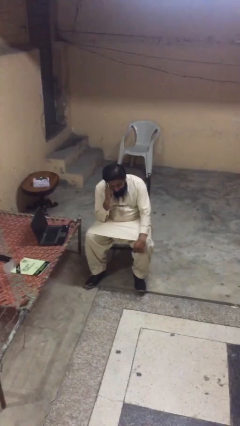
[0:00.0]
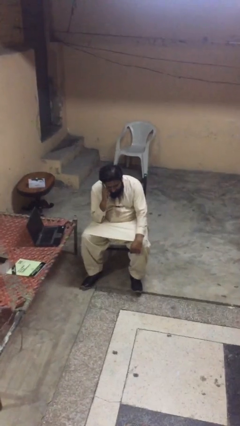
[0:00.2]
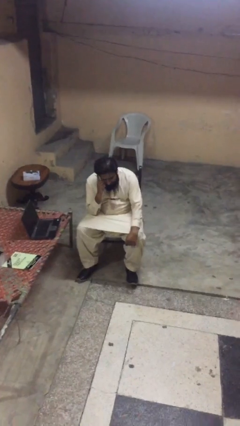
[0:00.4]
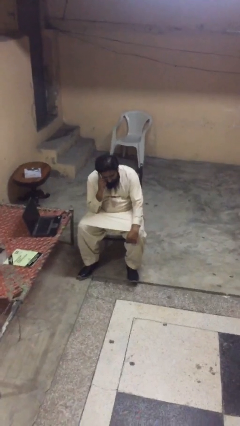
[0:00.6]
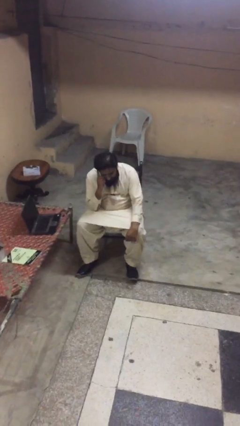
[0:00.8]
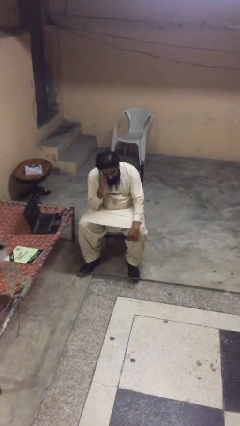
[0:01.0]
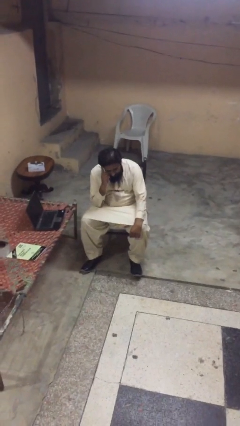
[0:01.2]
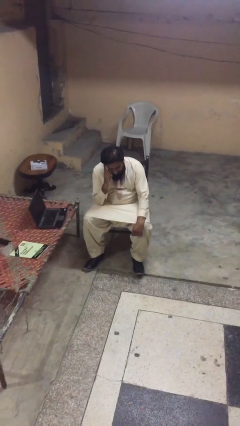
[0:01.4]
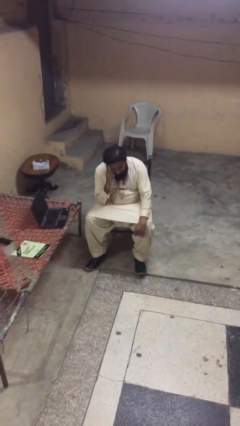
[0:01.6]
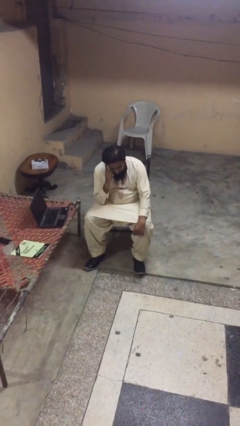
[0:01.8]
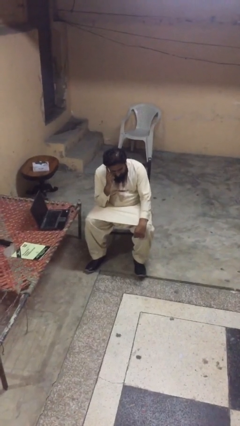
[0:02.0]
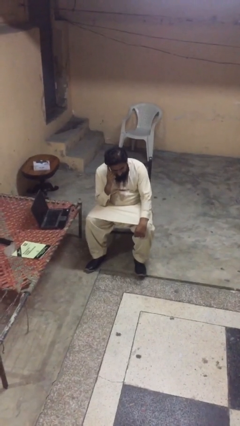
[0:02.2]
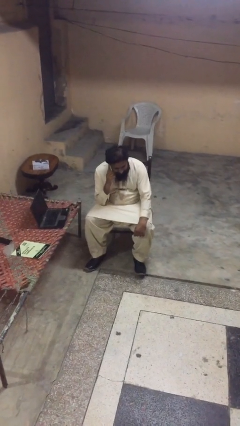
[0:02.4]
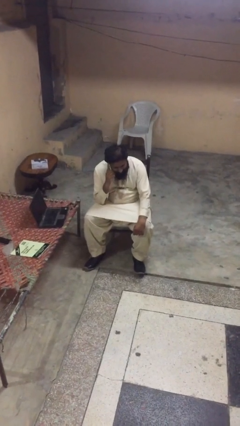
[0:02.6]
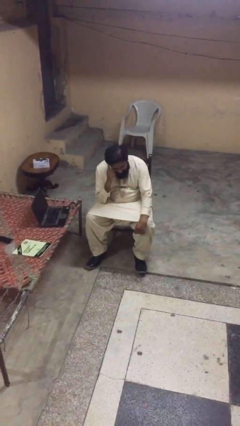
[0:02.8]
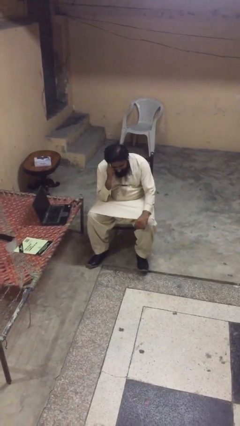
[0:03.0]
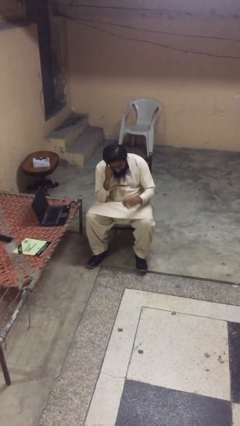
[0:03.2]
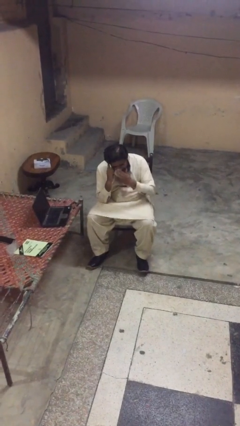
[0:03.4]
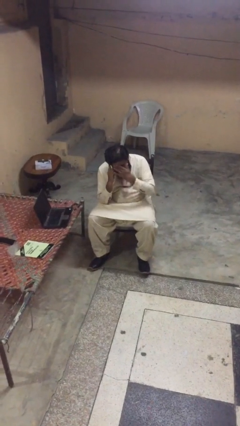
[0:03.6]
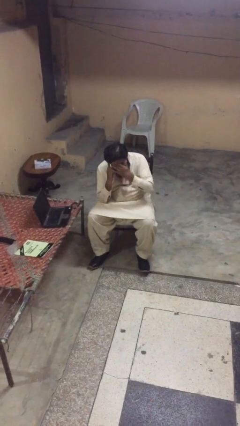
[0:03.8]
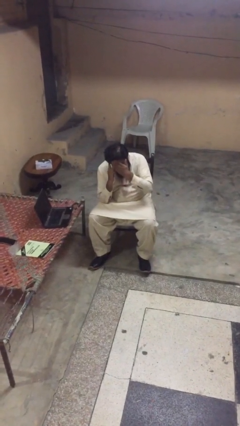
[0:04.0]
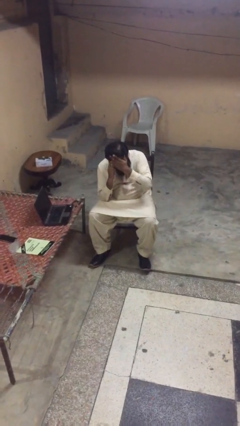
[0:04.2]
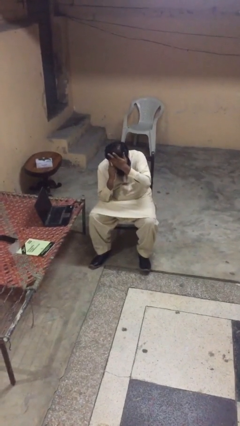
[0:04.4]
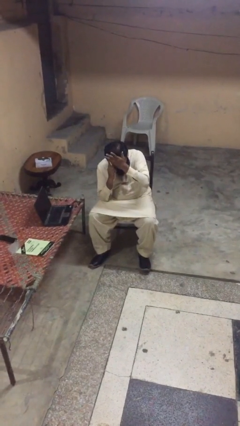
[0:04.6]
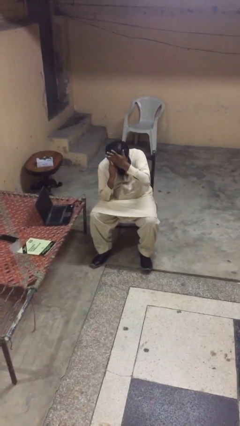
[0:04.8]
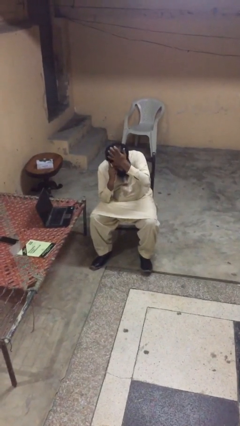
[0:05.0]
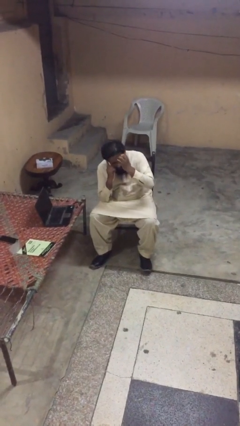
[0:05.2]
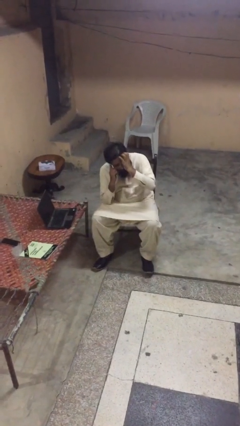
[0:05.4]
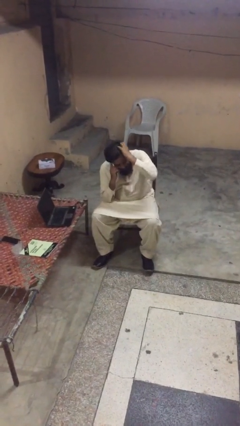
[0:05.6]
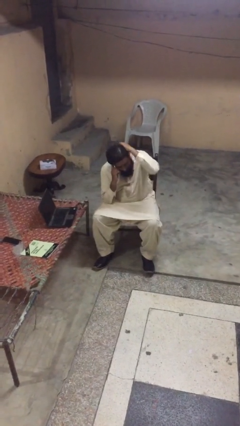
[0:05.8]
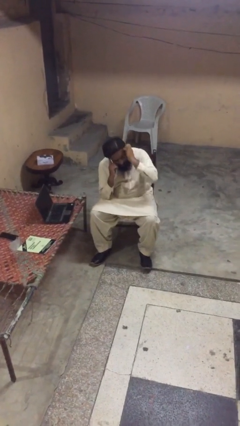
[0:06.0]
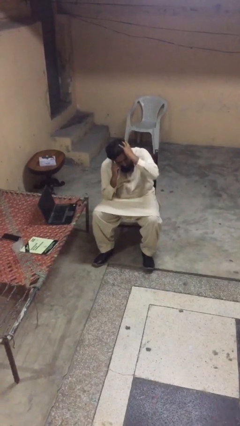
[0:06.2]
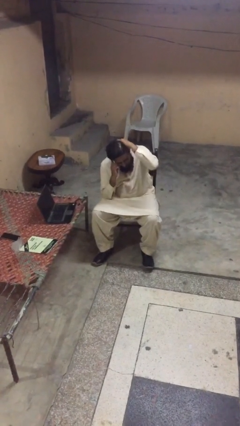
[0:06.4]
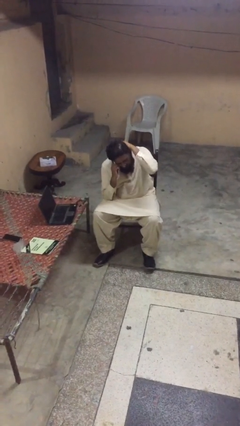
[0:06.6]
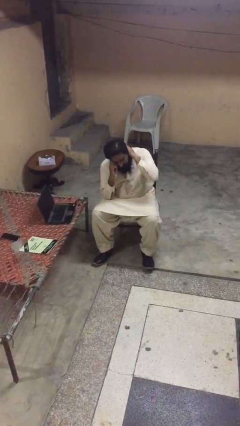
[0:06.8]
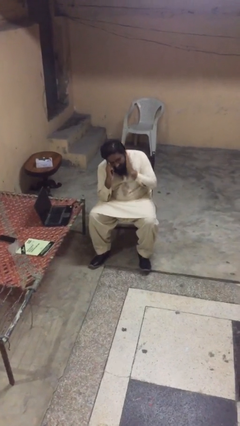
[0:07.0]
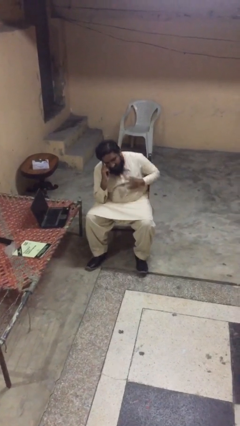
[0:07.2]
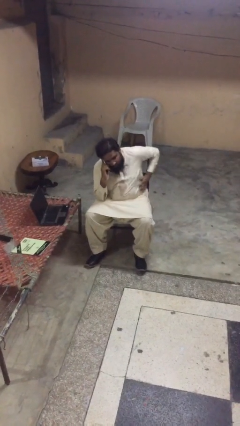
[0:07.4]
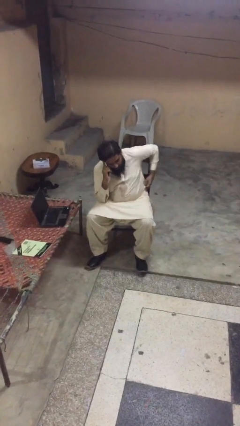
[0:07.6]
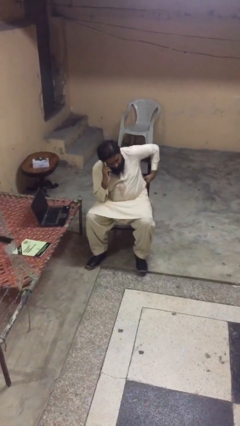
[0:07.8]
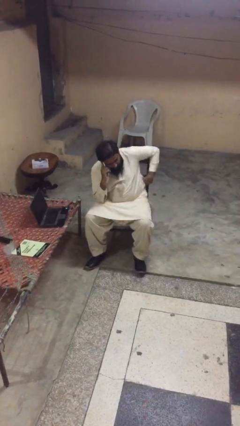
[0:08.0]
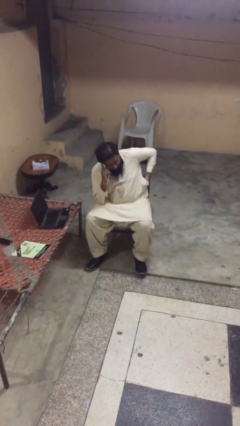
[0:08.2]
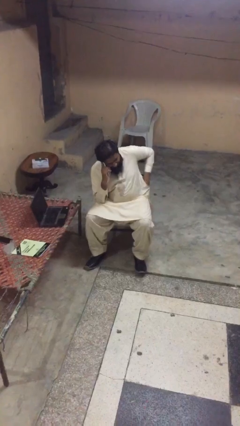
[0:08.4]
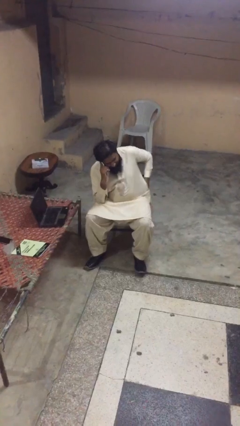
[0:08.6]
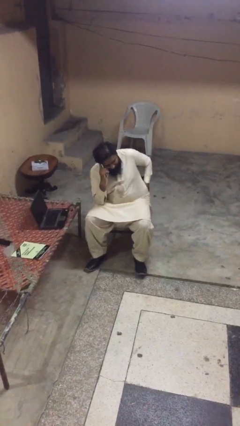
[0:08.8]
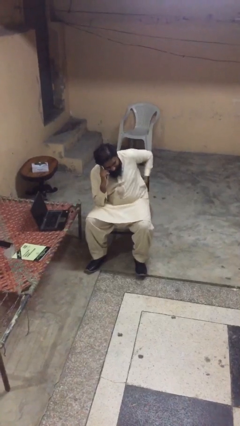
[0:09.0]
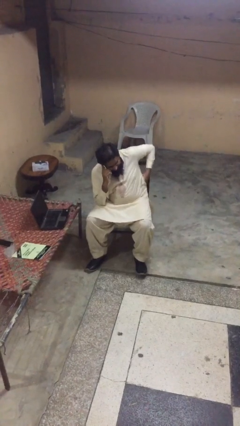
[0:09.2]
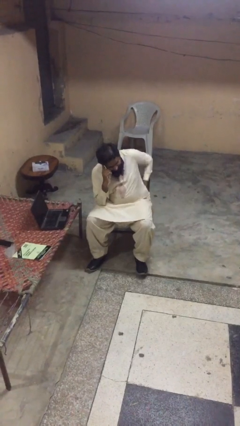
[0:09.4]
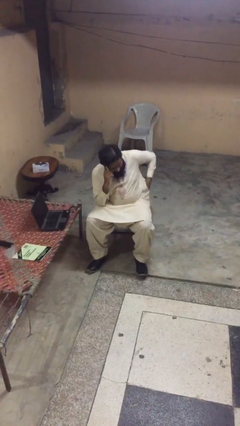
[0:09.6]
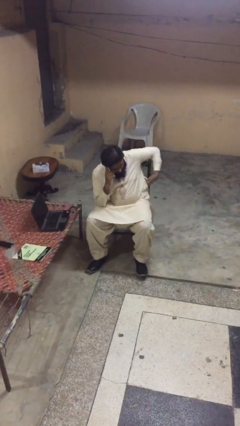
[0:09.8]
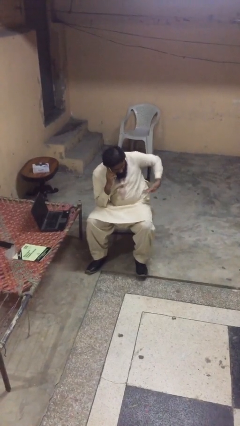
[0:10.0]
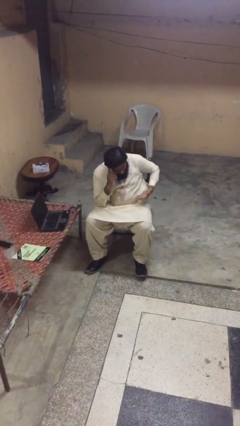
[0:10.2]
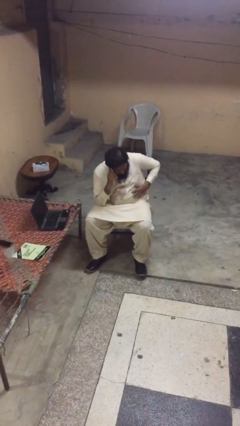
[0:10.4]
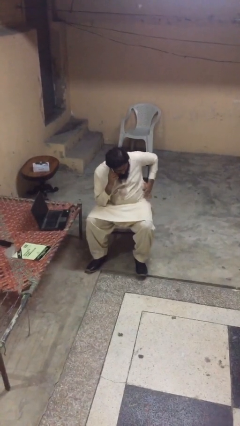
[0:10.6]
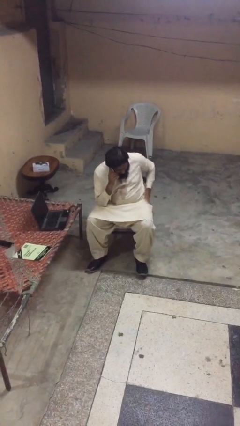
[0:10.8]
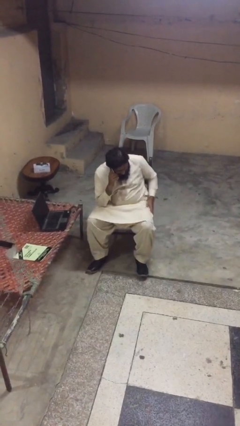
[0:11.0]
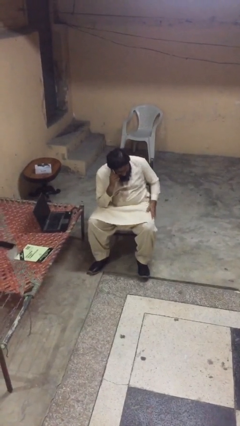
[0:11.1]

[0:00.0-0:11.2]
person talks on phone

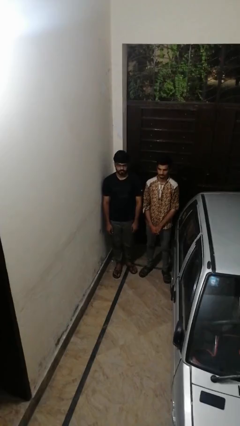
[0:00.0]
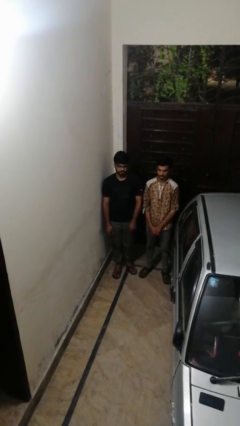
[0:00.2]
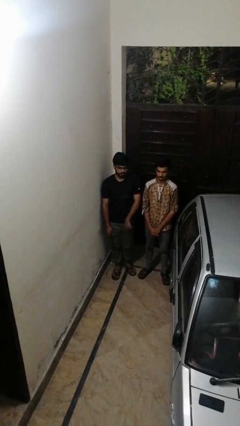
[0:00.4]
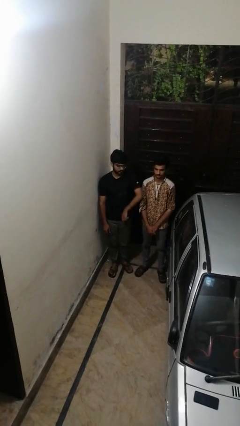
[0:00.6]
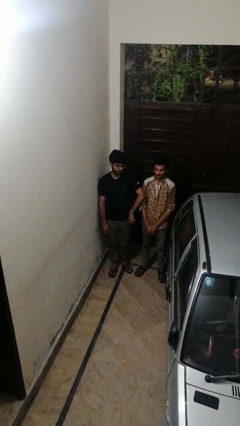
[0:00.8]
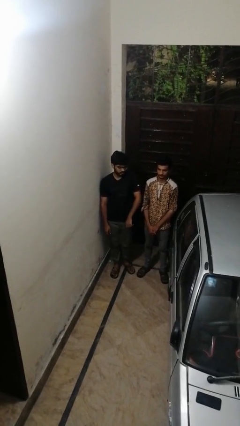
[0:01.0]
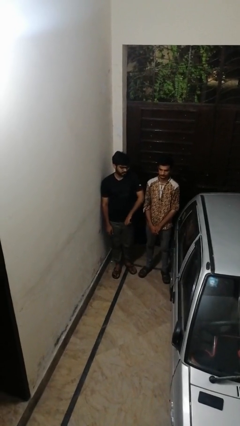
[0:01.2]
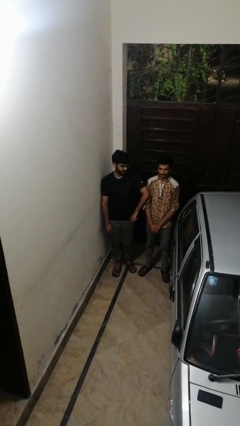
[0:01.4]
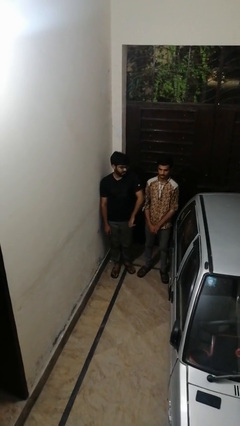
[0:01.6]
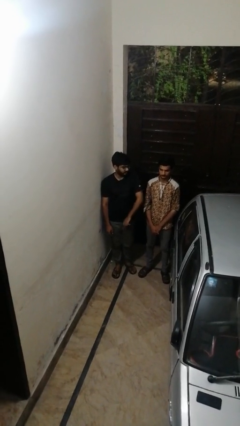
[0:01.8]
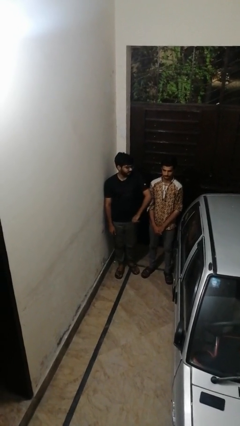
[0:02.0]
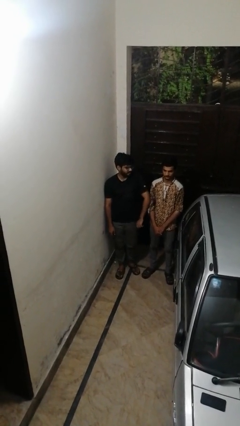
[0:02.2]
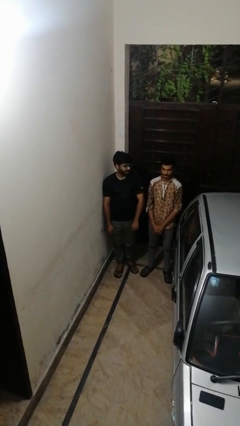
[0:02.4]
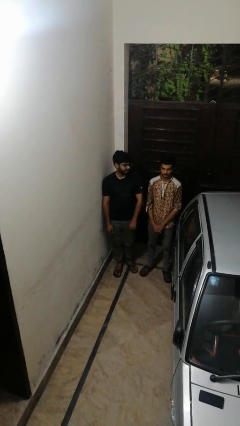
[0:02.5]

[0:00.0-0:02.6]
person nudges person with elbow

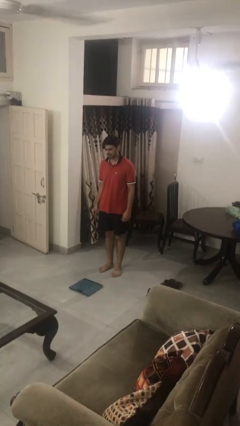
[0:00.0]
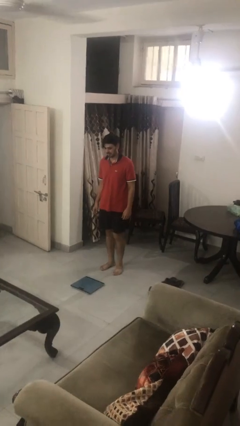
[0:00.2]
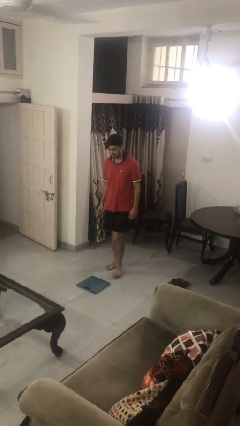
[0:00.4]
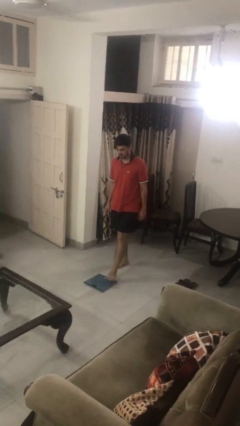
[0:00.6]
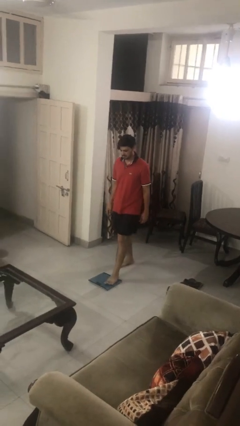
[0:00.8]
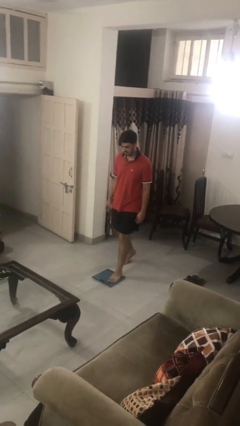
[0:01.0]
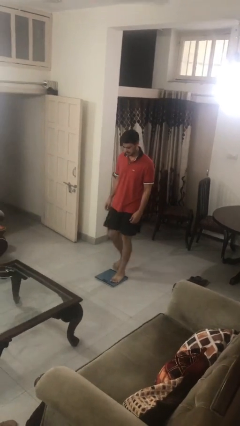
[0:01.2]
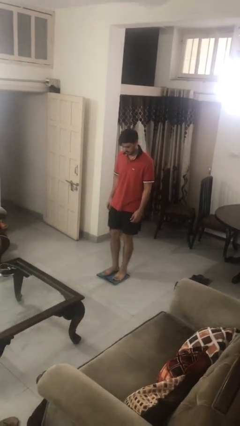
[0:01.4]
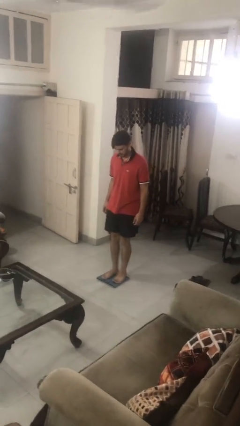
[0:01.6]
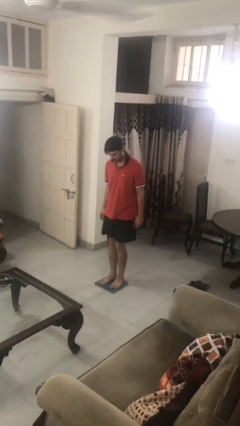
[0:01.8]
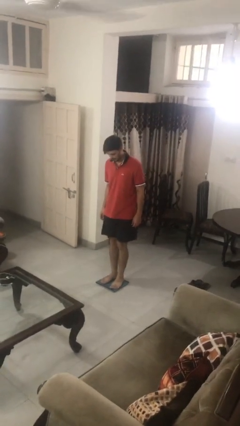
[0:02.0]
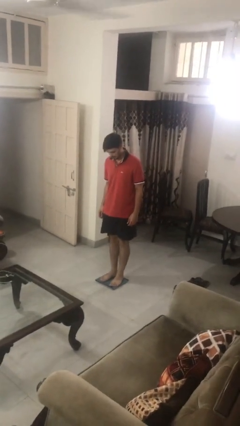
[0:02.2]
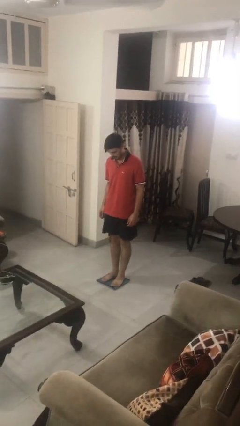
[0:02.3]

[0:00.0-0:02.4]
person uses bodyweight scale

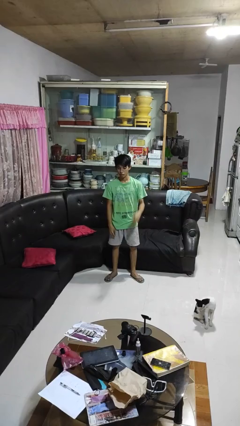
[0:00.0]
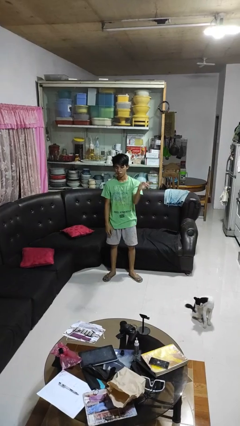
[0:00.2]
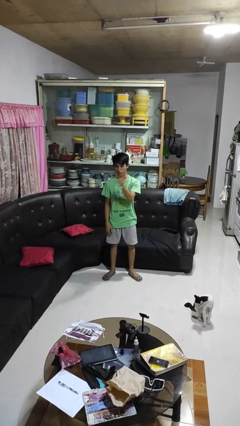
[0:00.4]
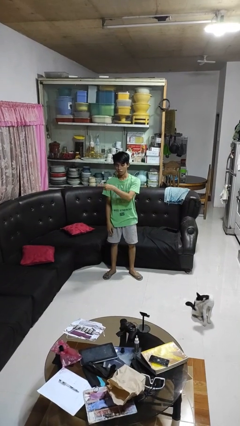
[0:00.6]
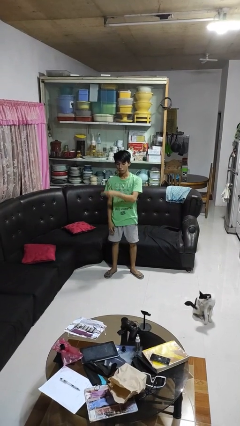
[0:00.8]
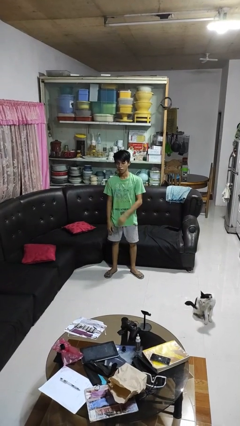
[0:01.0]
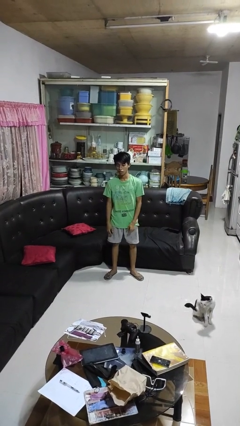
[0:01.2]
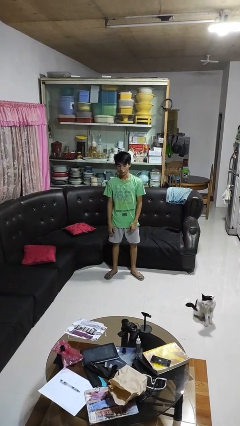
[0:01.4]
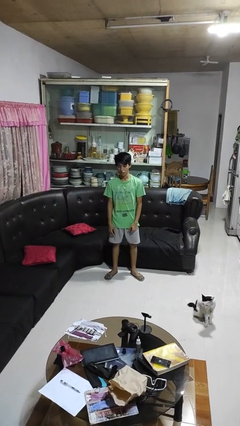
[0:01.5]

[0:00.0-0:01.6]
person gestures swipe right
